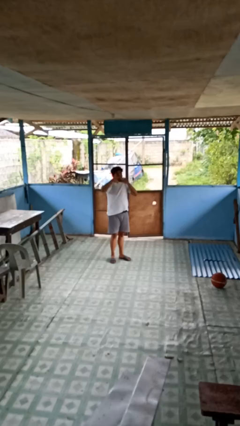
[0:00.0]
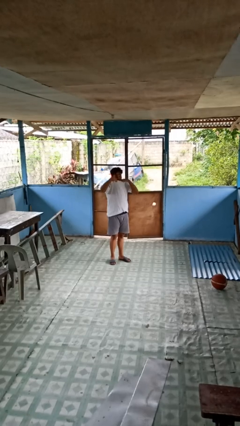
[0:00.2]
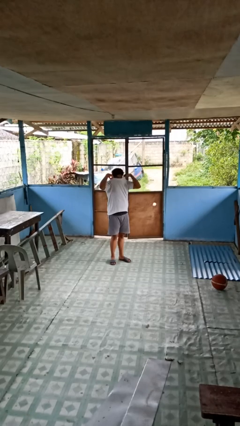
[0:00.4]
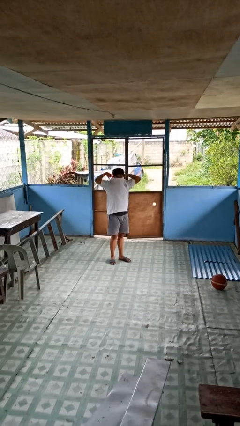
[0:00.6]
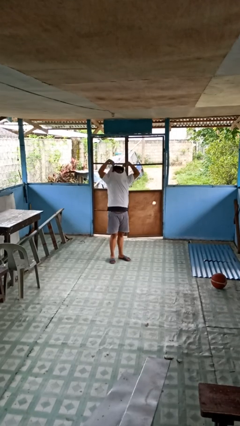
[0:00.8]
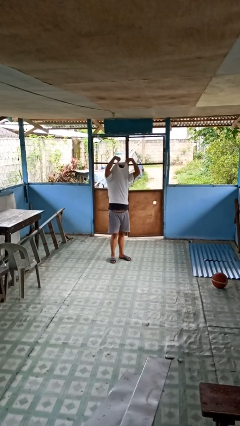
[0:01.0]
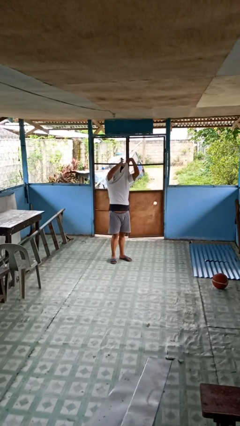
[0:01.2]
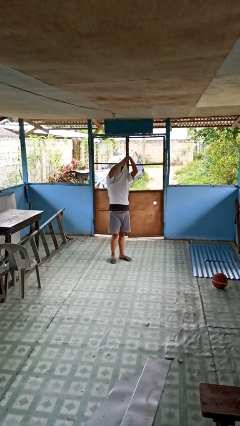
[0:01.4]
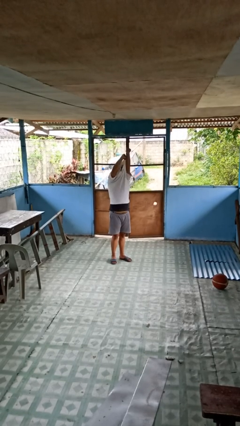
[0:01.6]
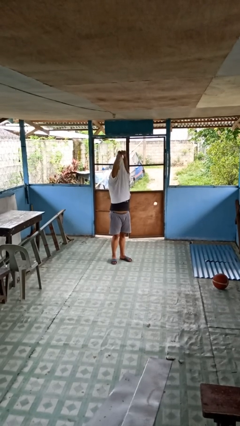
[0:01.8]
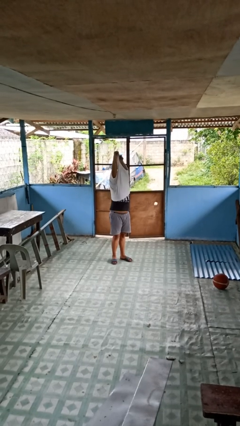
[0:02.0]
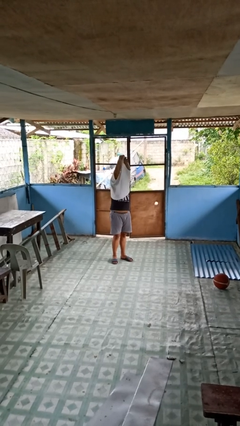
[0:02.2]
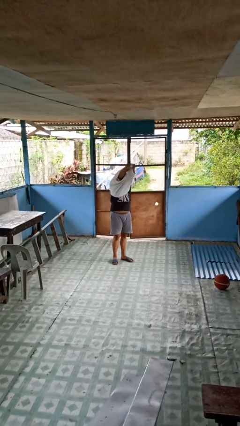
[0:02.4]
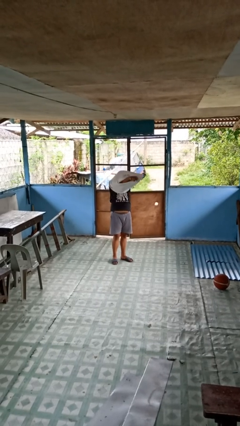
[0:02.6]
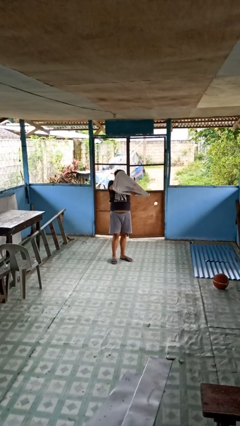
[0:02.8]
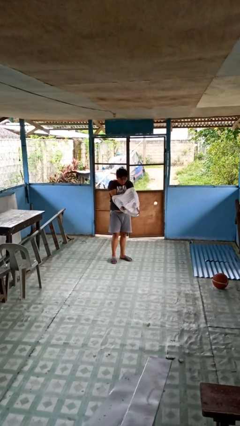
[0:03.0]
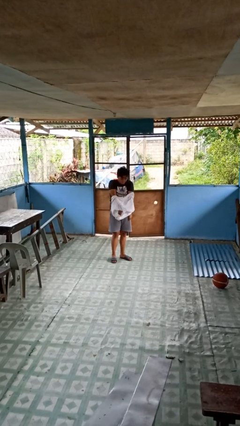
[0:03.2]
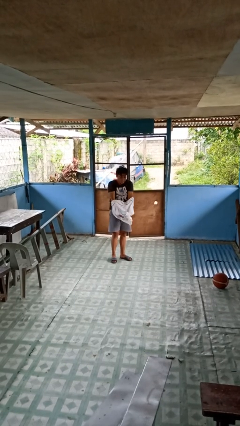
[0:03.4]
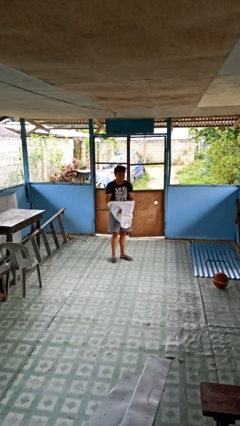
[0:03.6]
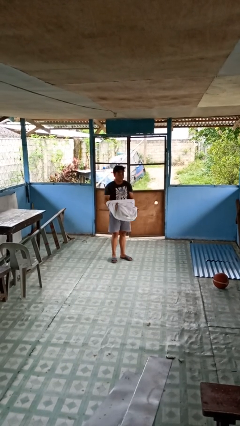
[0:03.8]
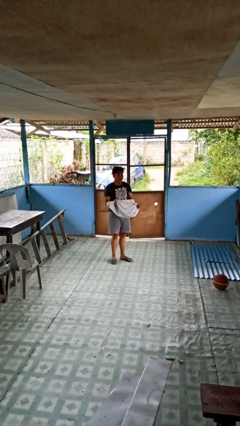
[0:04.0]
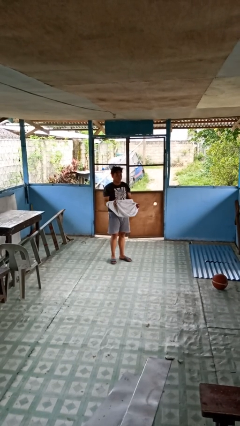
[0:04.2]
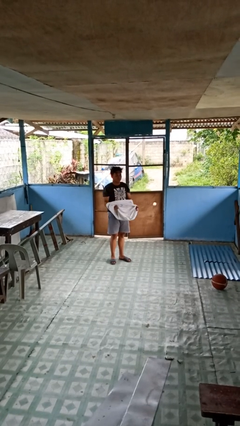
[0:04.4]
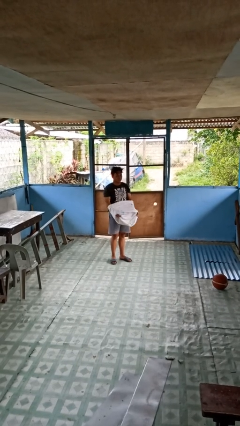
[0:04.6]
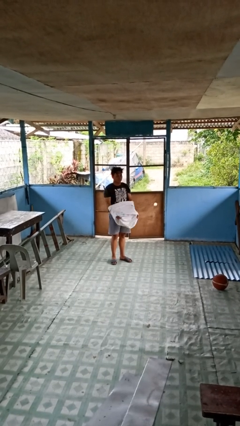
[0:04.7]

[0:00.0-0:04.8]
person takes off shirt

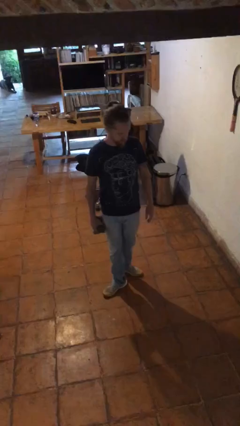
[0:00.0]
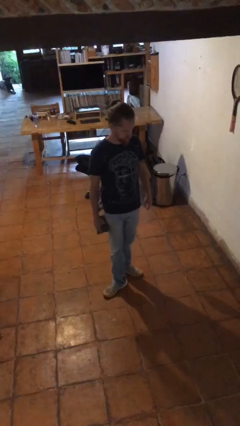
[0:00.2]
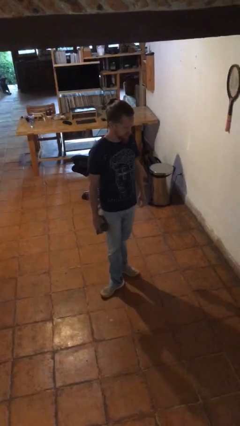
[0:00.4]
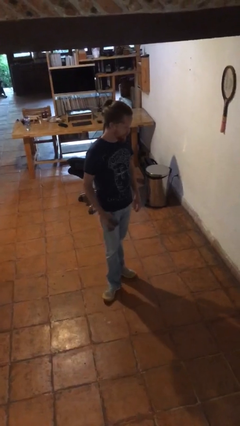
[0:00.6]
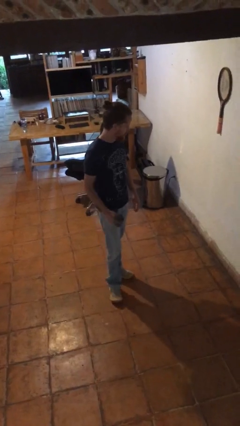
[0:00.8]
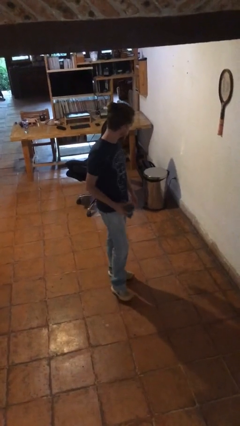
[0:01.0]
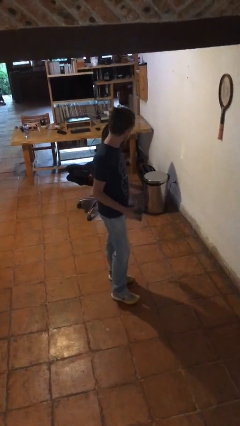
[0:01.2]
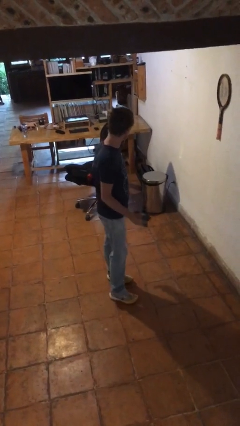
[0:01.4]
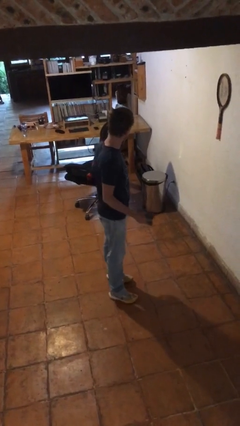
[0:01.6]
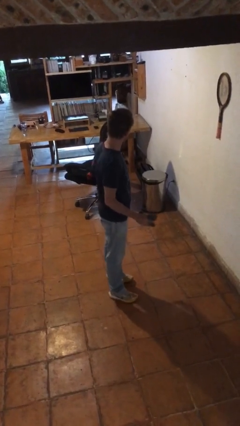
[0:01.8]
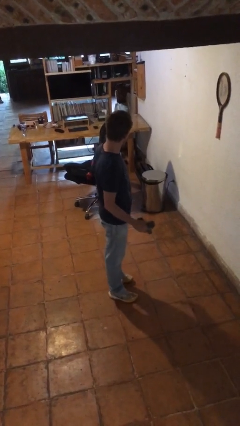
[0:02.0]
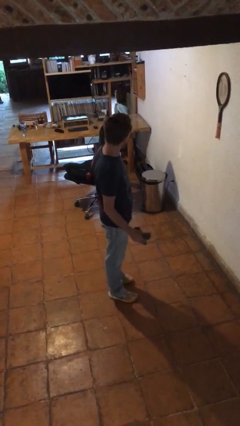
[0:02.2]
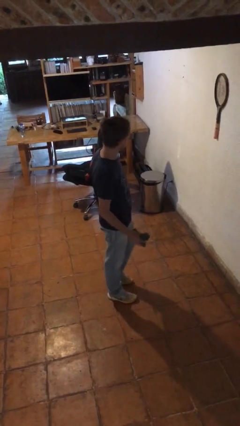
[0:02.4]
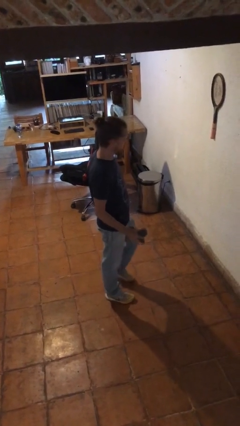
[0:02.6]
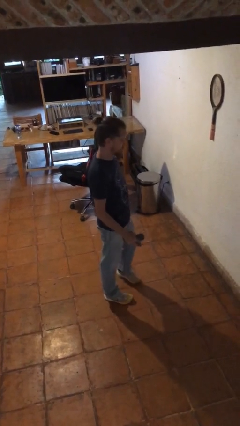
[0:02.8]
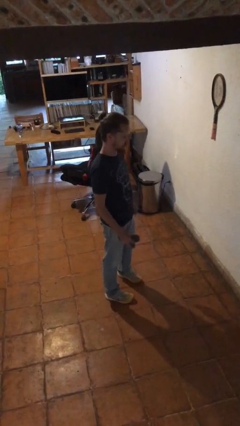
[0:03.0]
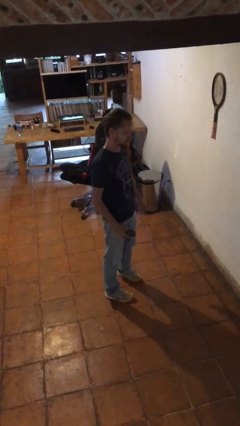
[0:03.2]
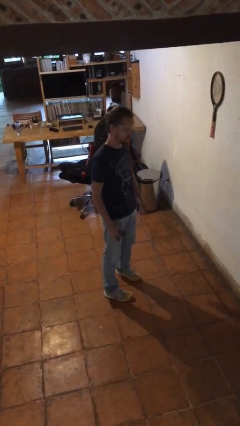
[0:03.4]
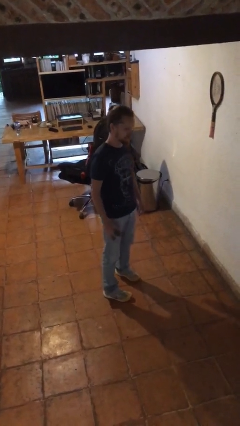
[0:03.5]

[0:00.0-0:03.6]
person squeezes object

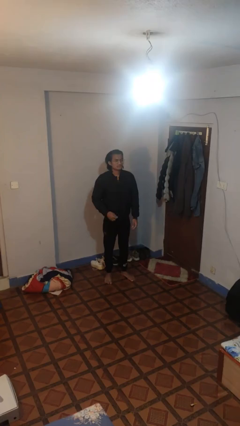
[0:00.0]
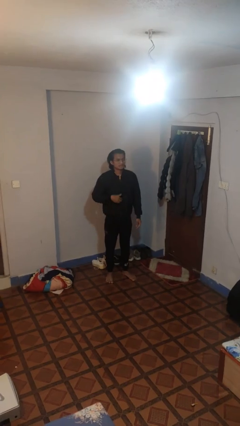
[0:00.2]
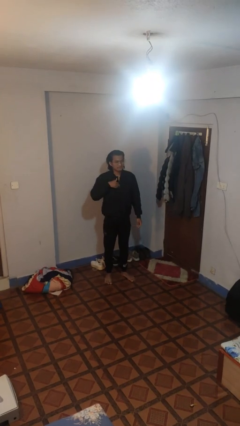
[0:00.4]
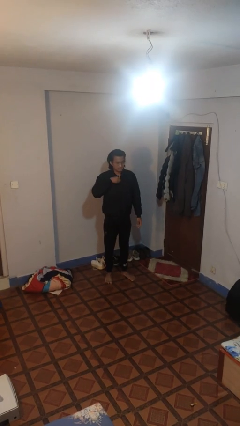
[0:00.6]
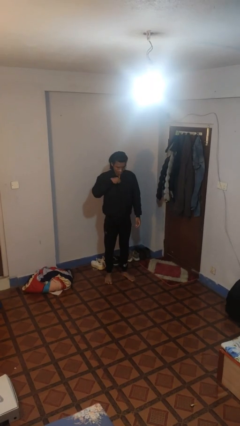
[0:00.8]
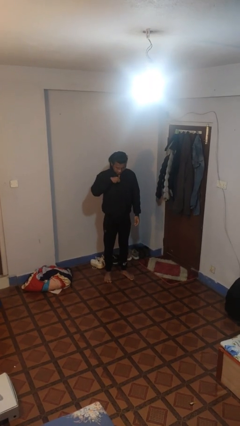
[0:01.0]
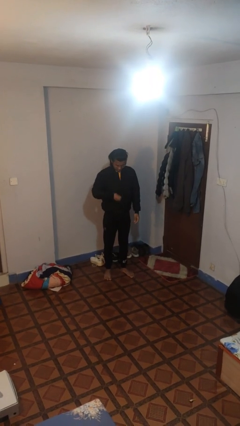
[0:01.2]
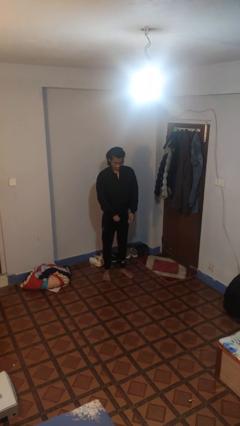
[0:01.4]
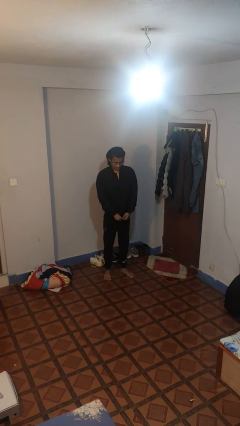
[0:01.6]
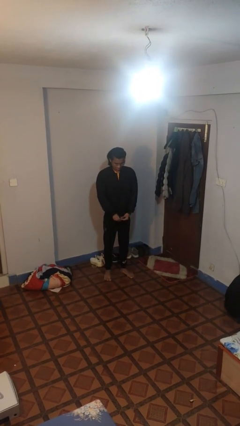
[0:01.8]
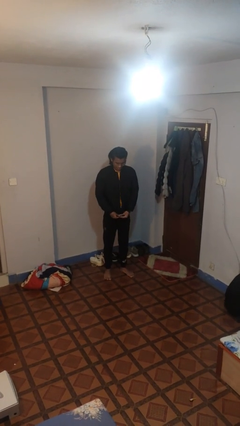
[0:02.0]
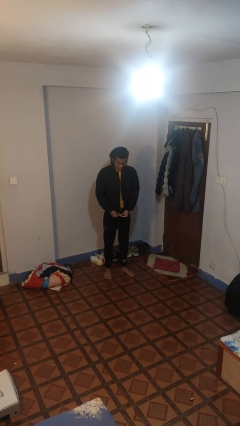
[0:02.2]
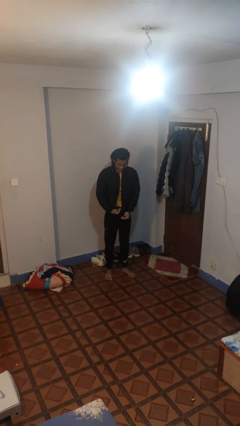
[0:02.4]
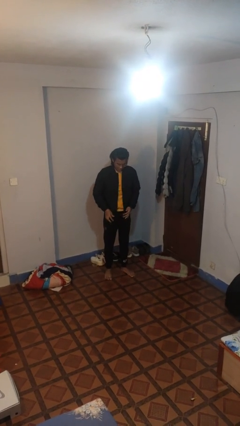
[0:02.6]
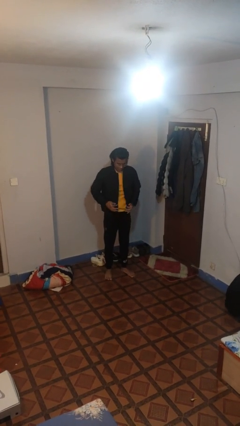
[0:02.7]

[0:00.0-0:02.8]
person unzips jacket

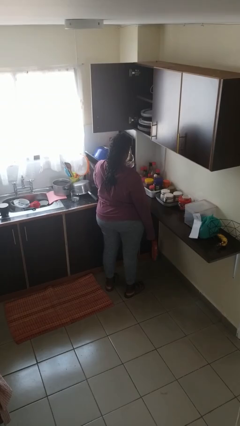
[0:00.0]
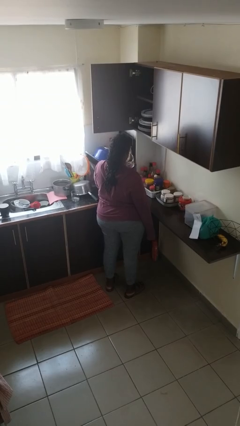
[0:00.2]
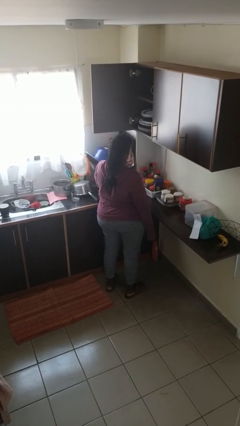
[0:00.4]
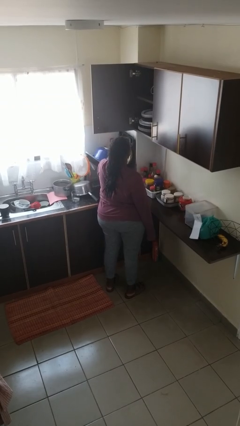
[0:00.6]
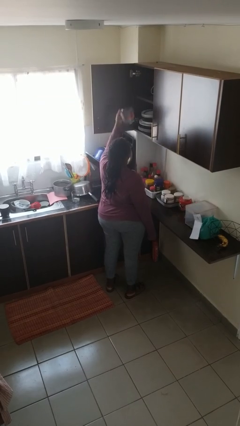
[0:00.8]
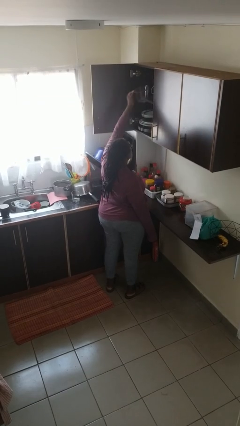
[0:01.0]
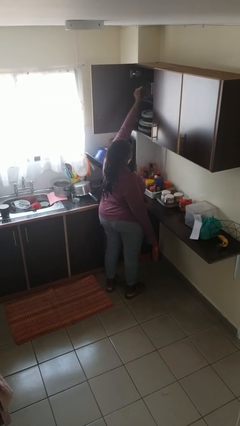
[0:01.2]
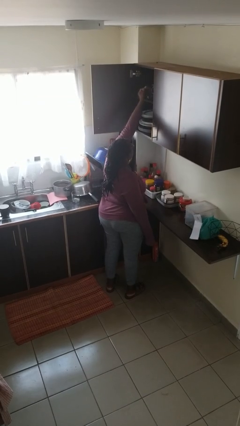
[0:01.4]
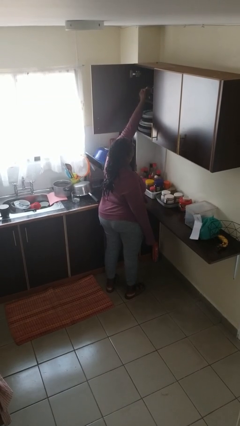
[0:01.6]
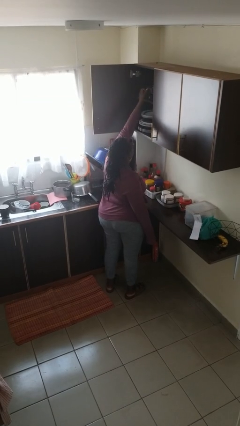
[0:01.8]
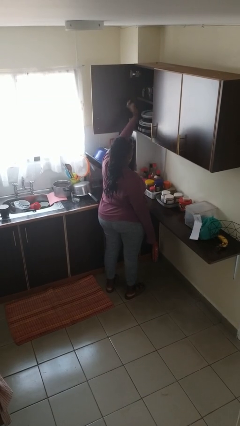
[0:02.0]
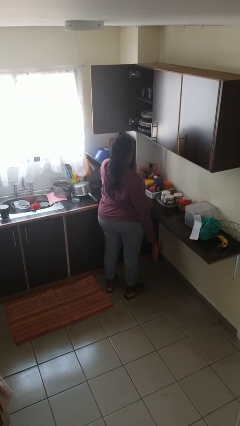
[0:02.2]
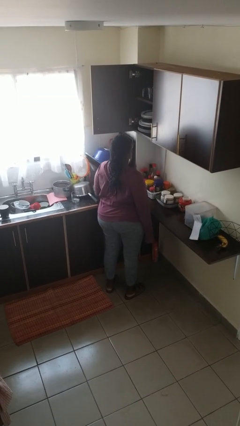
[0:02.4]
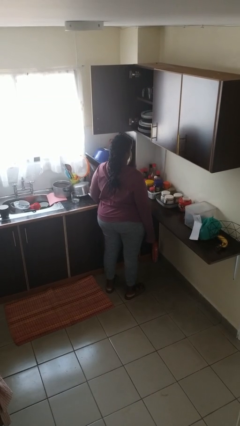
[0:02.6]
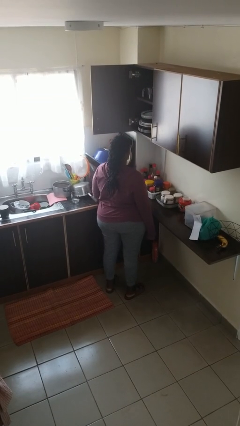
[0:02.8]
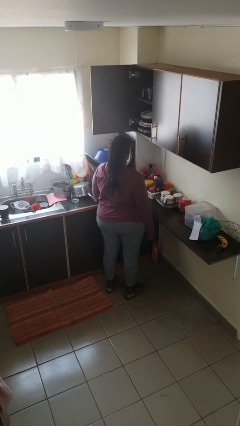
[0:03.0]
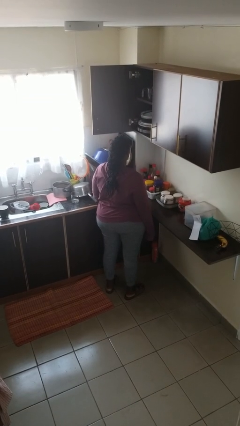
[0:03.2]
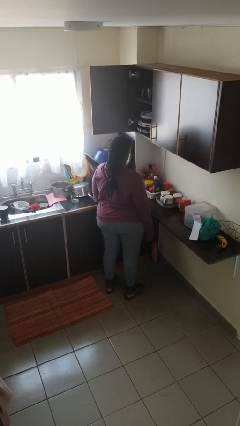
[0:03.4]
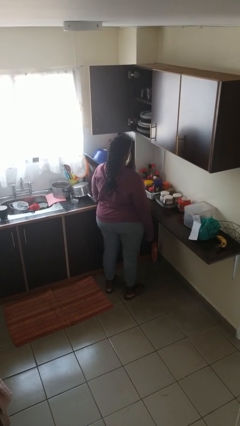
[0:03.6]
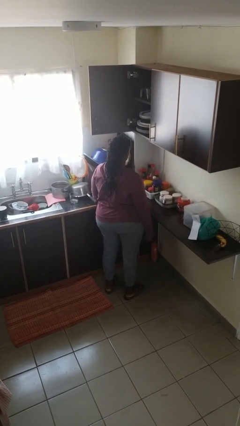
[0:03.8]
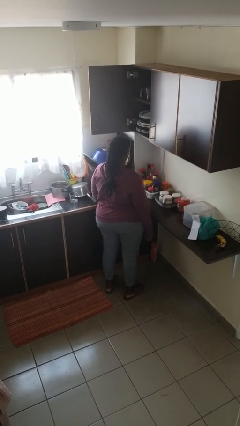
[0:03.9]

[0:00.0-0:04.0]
person puts down object into cabinet

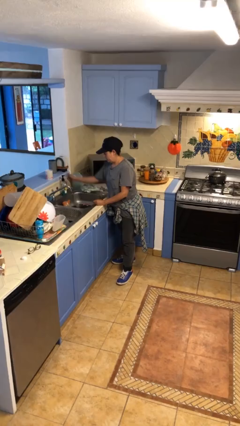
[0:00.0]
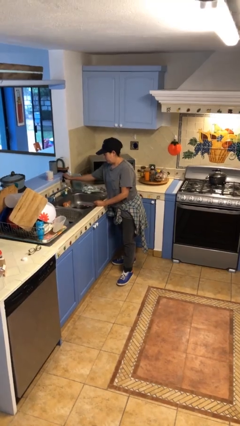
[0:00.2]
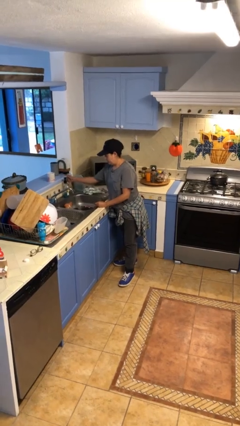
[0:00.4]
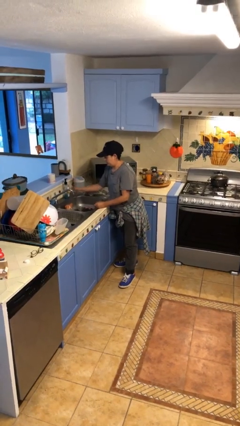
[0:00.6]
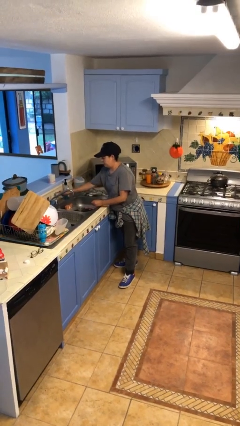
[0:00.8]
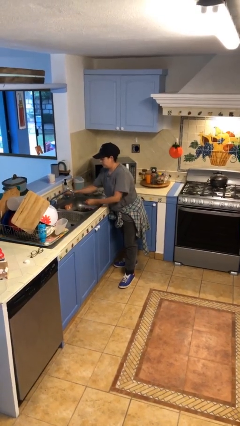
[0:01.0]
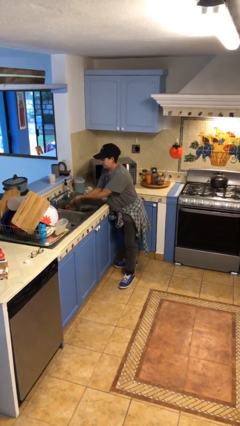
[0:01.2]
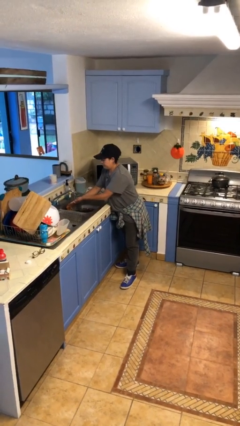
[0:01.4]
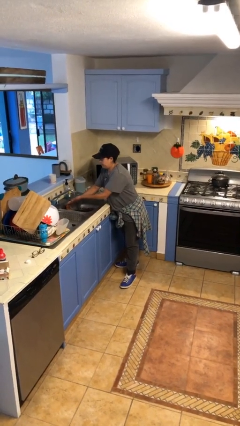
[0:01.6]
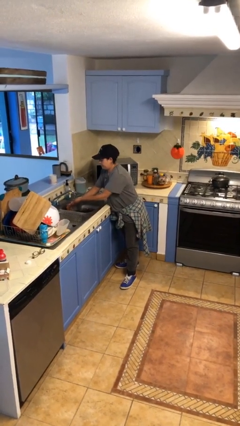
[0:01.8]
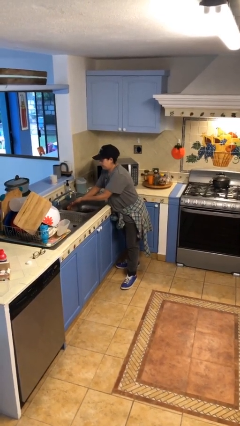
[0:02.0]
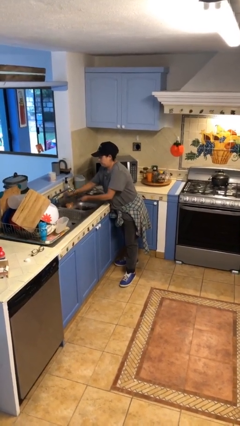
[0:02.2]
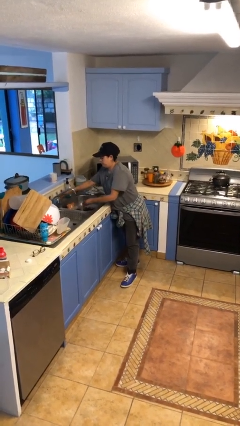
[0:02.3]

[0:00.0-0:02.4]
person washes hands
